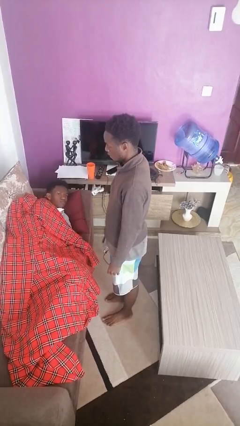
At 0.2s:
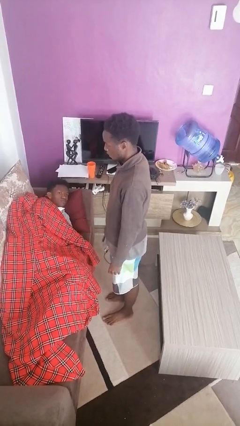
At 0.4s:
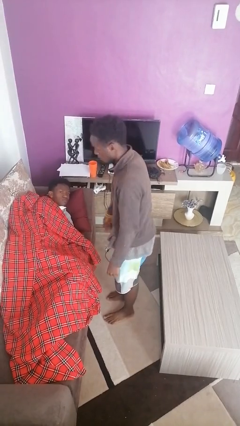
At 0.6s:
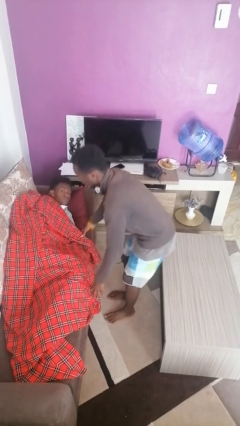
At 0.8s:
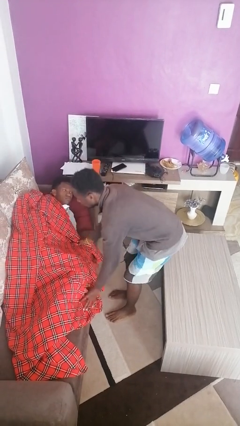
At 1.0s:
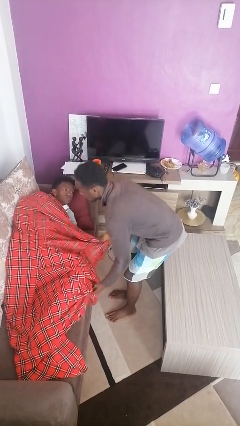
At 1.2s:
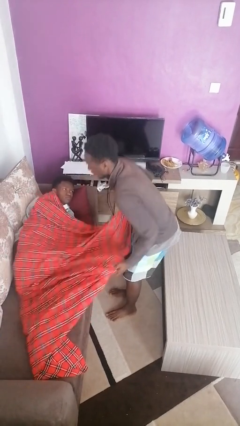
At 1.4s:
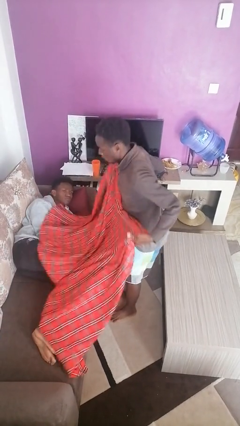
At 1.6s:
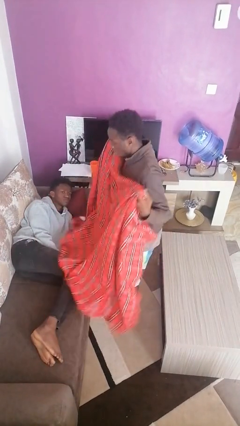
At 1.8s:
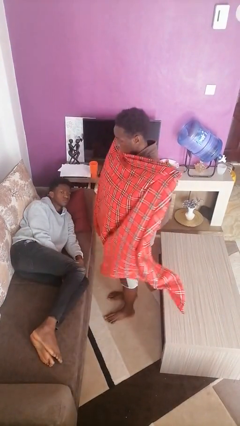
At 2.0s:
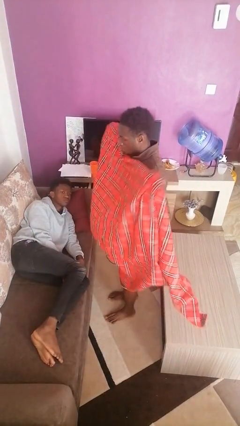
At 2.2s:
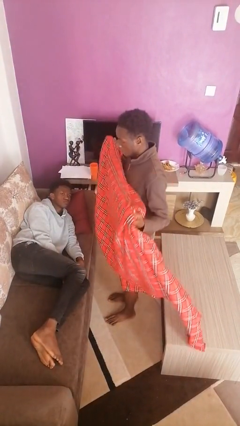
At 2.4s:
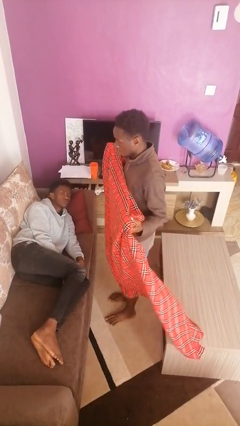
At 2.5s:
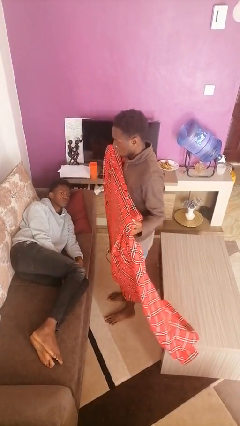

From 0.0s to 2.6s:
person uncovers friend with blanket

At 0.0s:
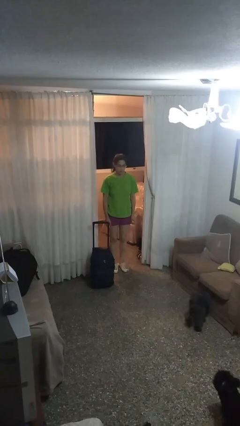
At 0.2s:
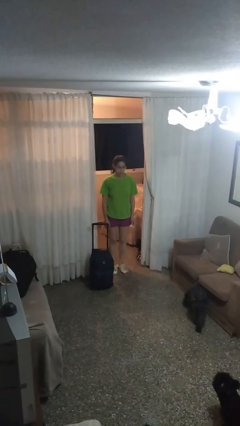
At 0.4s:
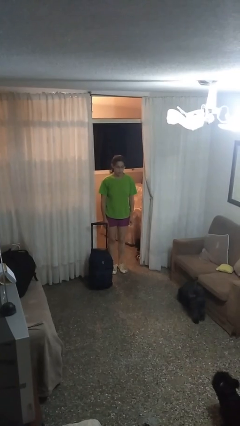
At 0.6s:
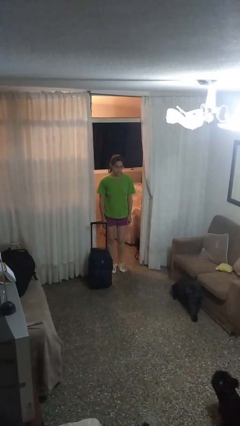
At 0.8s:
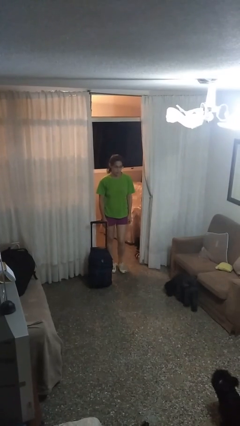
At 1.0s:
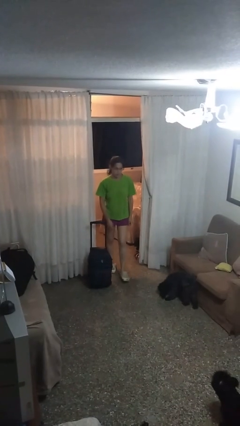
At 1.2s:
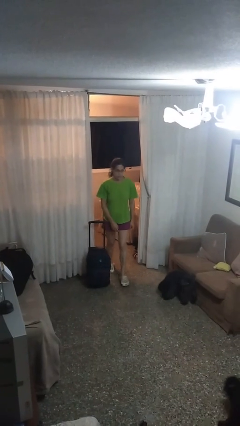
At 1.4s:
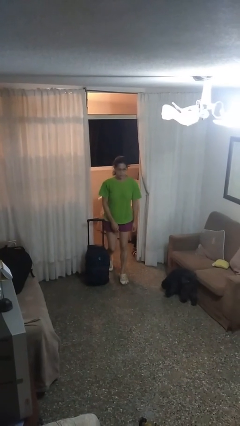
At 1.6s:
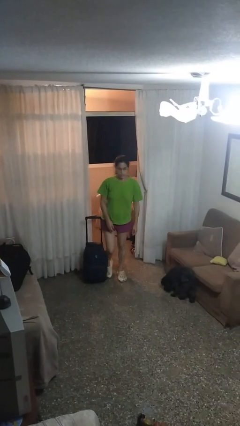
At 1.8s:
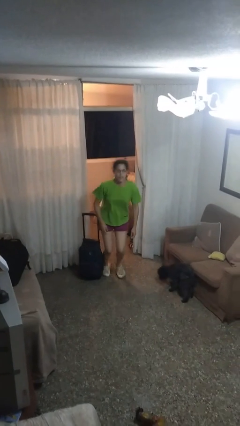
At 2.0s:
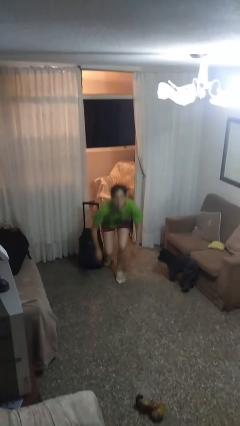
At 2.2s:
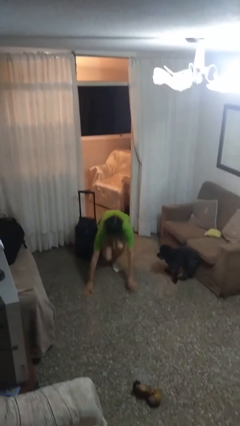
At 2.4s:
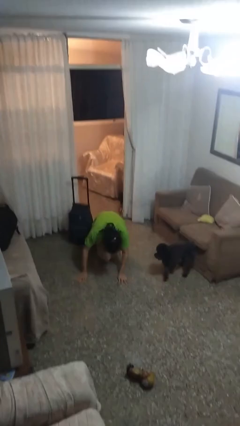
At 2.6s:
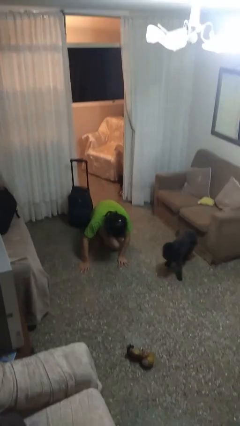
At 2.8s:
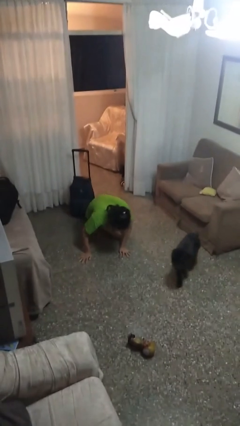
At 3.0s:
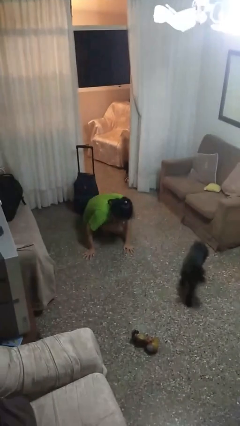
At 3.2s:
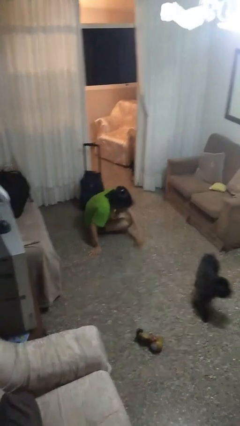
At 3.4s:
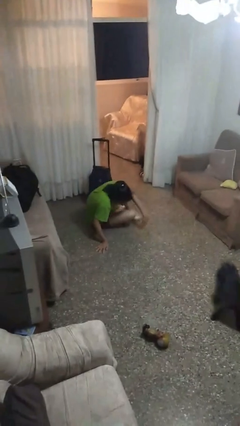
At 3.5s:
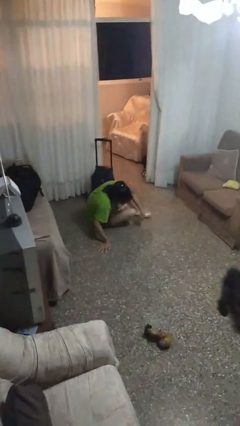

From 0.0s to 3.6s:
person trips on object on floor

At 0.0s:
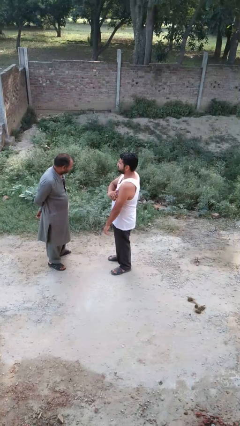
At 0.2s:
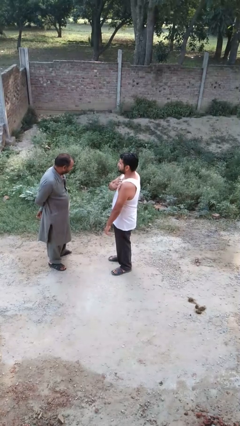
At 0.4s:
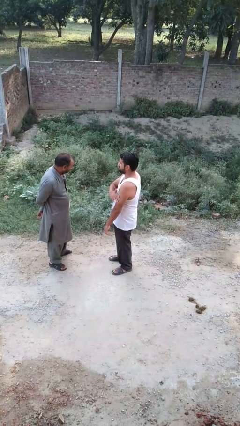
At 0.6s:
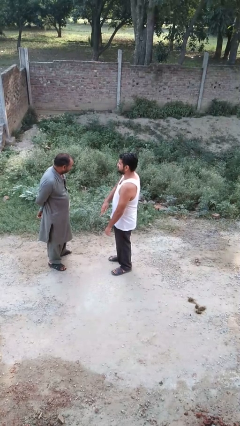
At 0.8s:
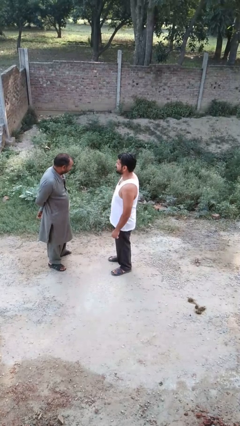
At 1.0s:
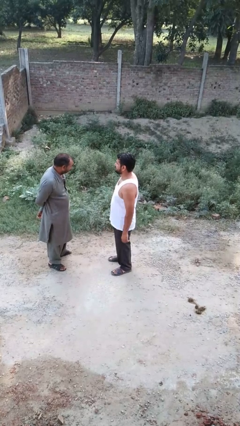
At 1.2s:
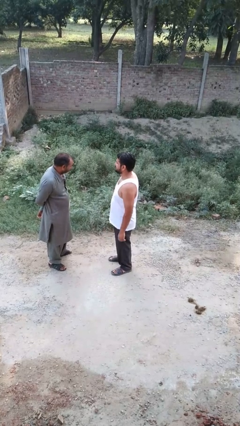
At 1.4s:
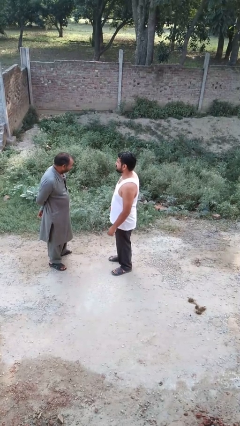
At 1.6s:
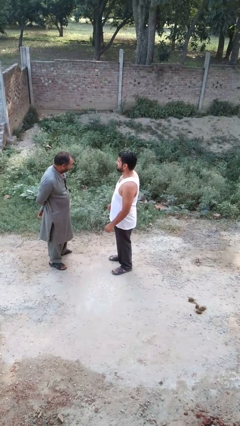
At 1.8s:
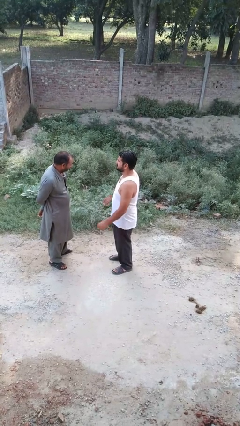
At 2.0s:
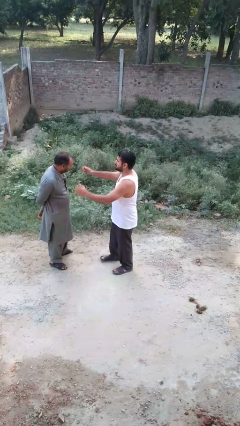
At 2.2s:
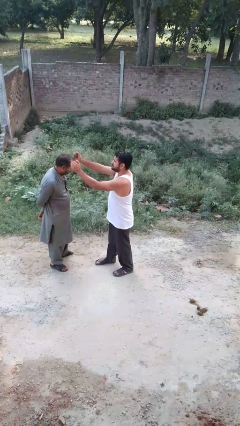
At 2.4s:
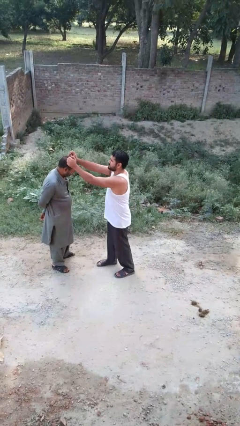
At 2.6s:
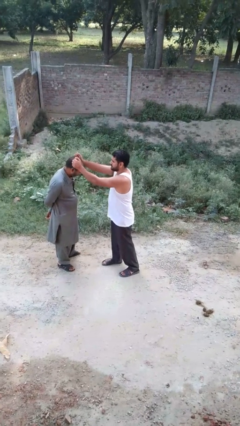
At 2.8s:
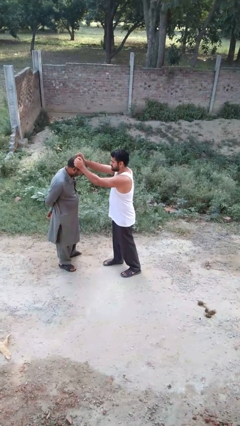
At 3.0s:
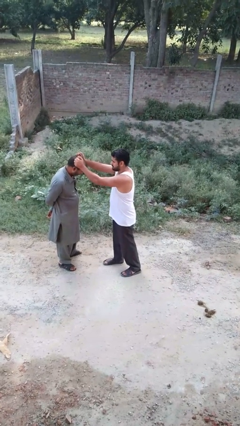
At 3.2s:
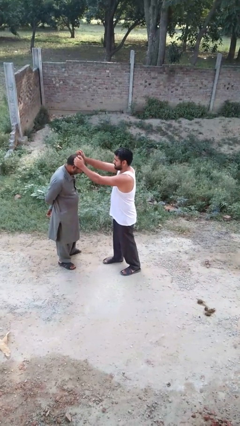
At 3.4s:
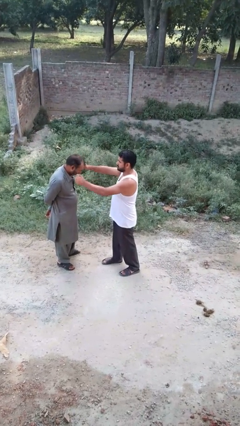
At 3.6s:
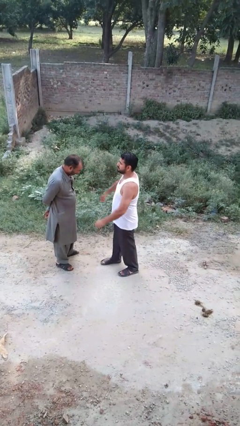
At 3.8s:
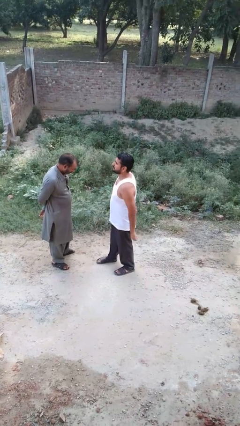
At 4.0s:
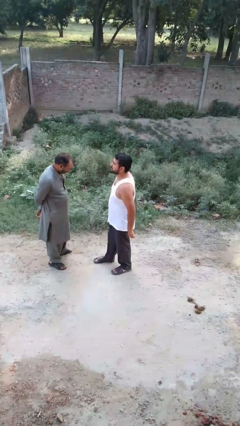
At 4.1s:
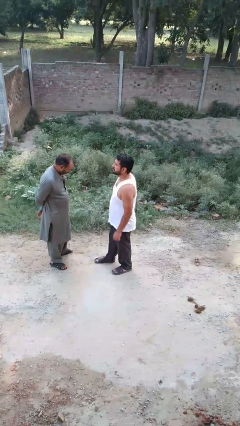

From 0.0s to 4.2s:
person grabs person by hair

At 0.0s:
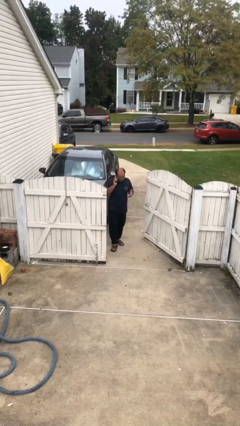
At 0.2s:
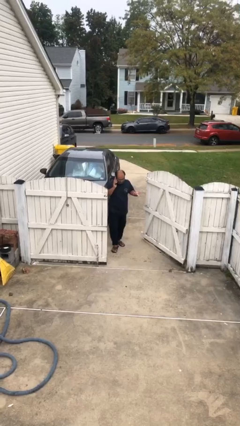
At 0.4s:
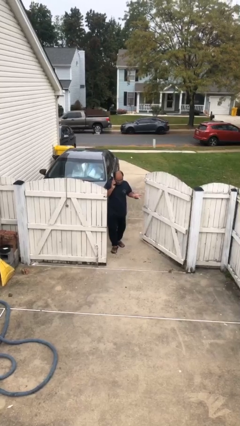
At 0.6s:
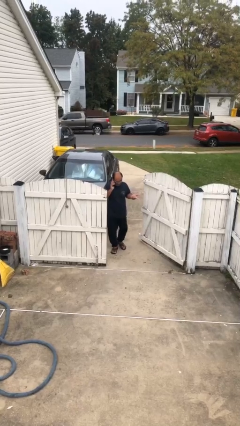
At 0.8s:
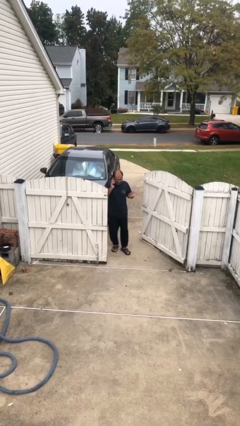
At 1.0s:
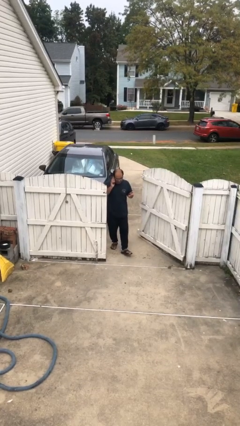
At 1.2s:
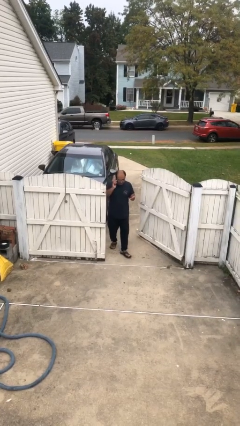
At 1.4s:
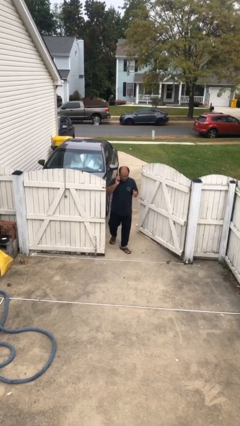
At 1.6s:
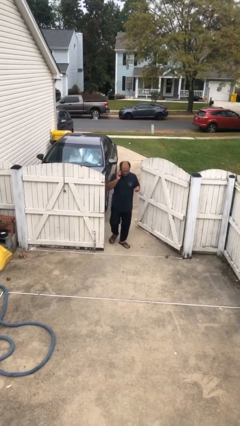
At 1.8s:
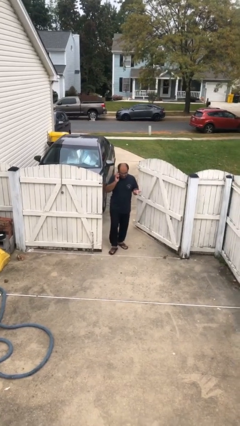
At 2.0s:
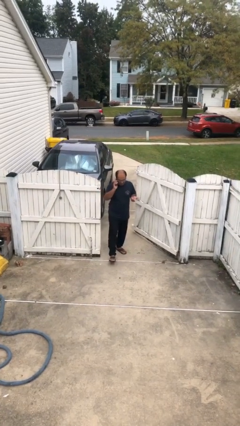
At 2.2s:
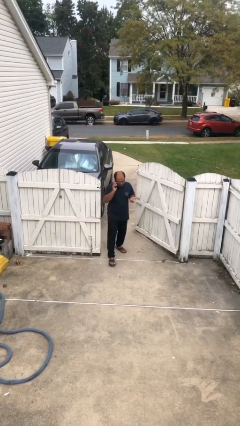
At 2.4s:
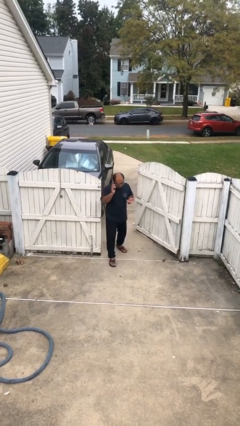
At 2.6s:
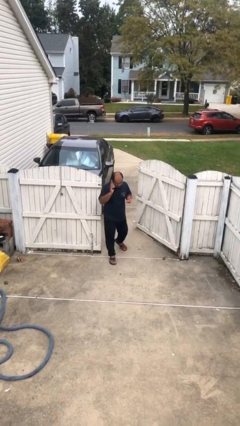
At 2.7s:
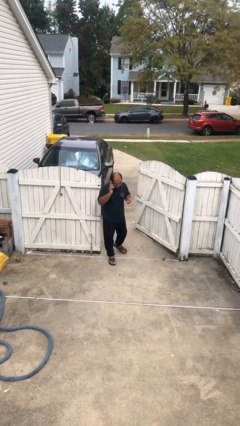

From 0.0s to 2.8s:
person enters scene through structure

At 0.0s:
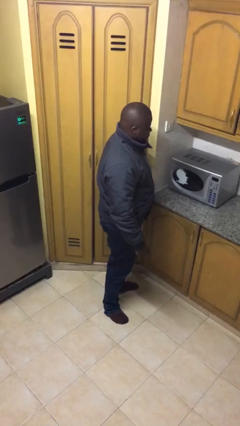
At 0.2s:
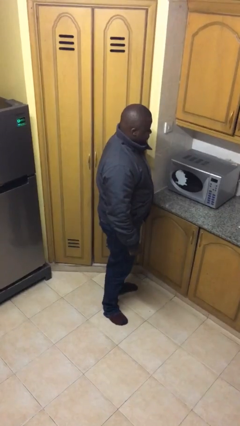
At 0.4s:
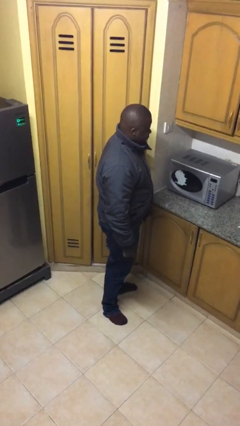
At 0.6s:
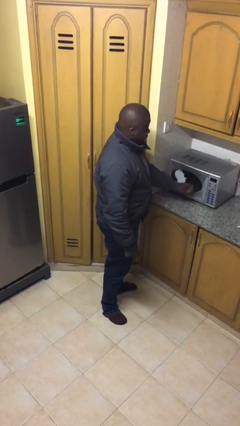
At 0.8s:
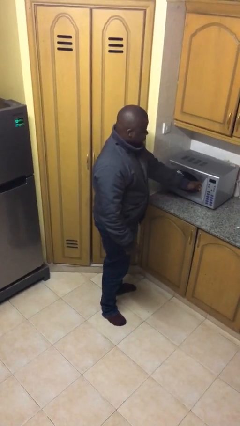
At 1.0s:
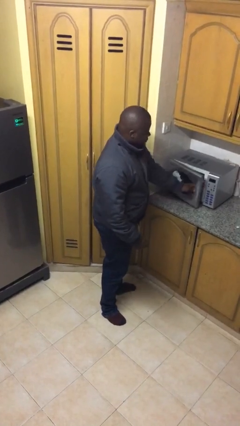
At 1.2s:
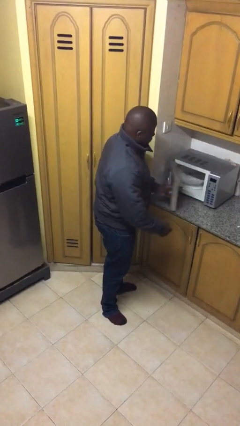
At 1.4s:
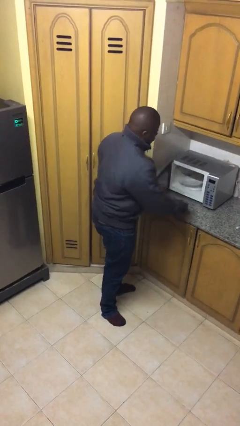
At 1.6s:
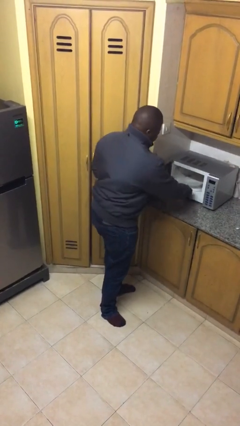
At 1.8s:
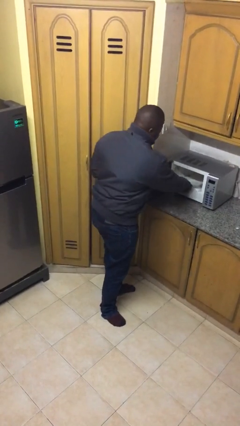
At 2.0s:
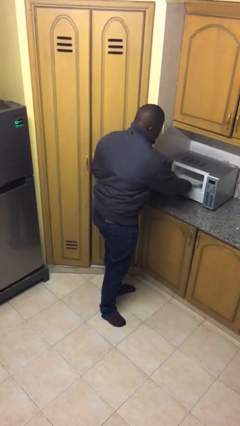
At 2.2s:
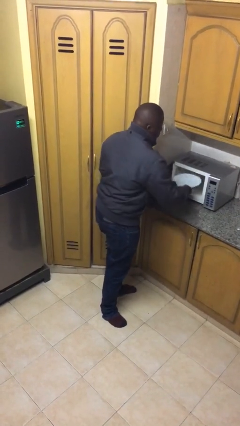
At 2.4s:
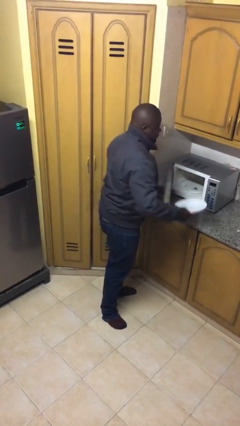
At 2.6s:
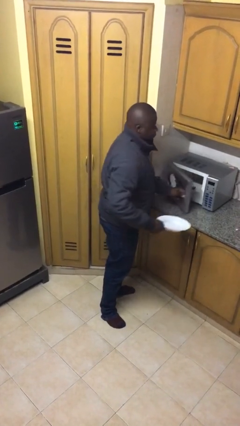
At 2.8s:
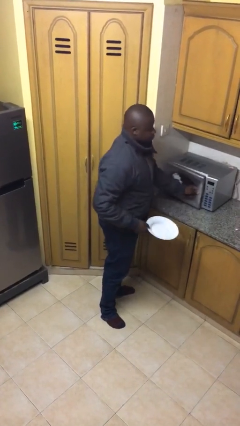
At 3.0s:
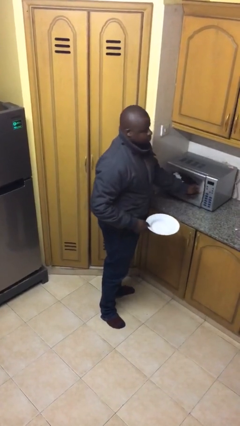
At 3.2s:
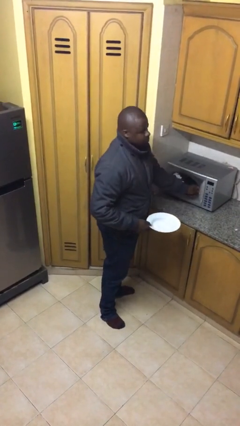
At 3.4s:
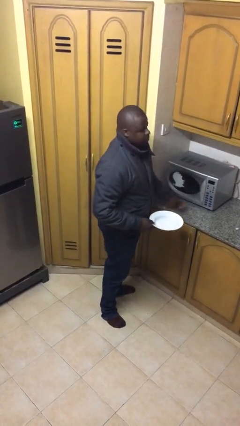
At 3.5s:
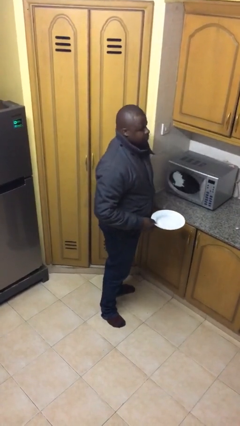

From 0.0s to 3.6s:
person takes object from microwave

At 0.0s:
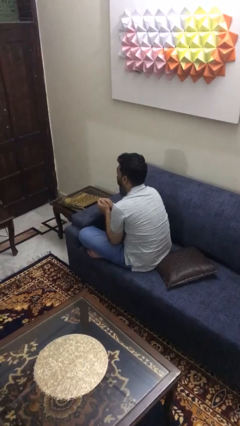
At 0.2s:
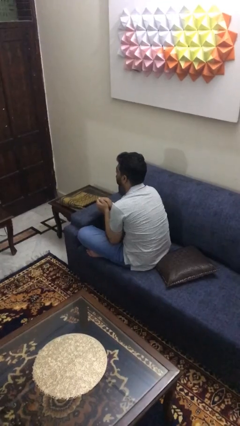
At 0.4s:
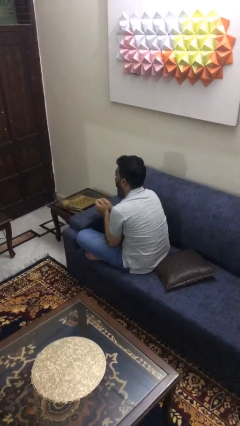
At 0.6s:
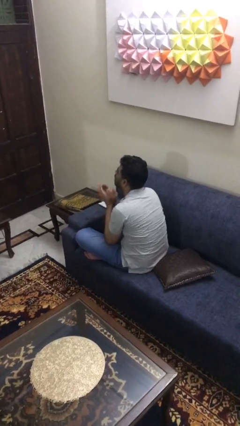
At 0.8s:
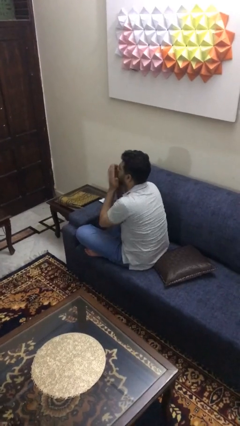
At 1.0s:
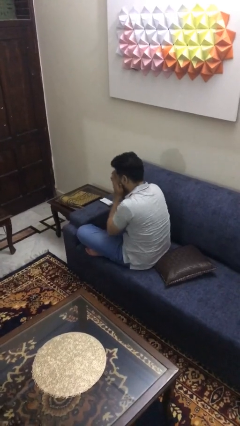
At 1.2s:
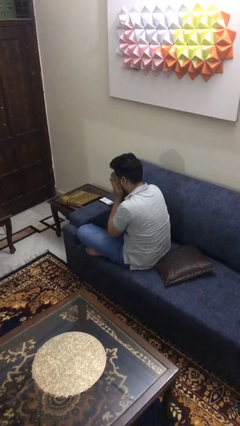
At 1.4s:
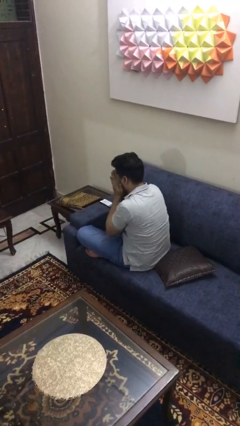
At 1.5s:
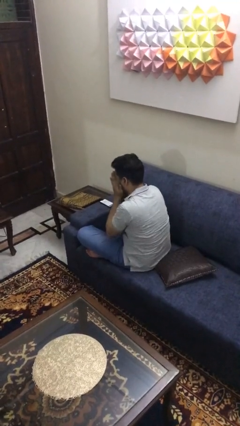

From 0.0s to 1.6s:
person sneezes into arm
